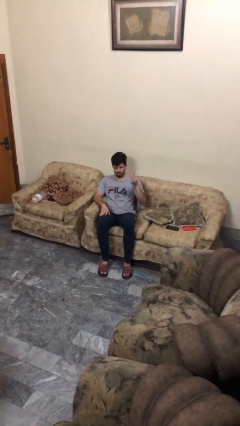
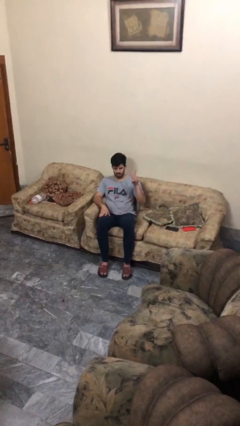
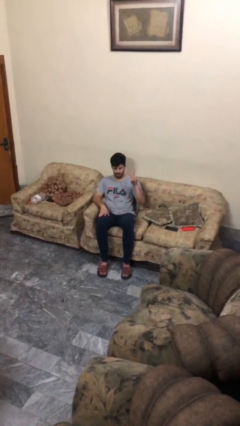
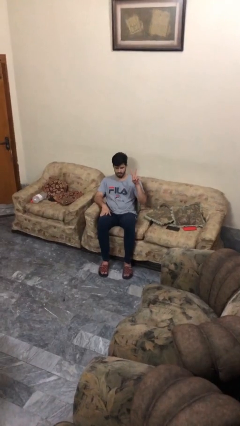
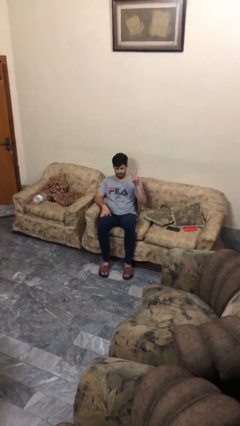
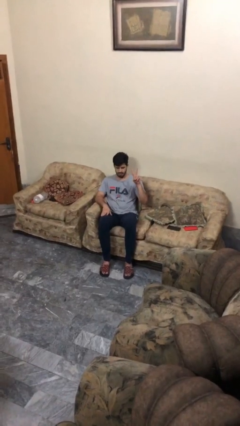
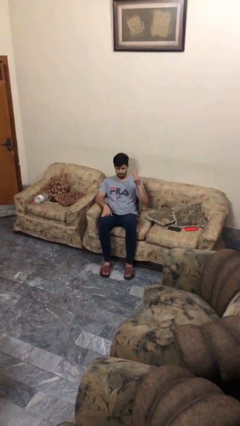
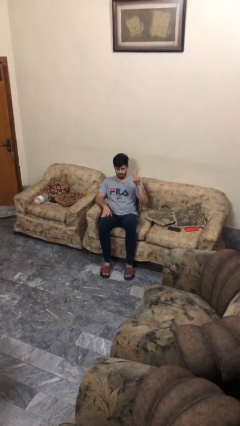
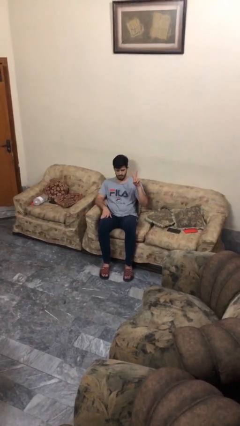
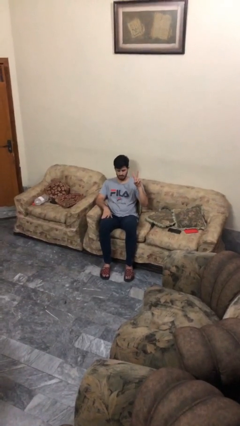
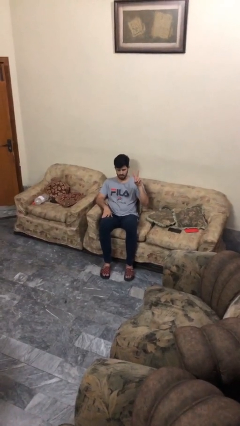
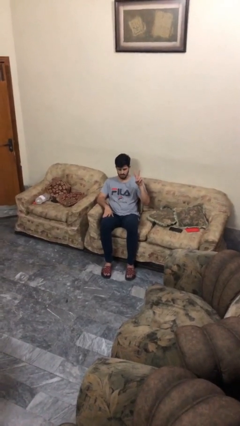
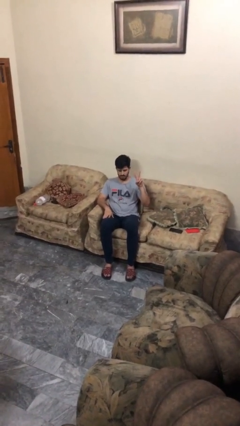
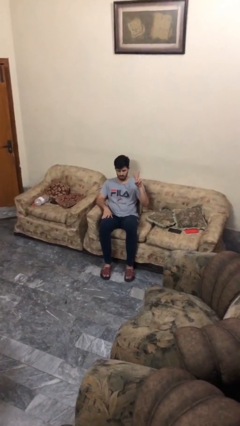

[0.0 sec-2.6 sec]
person gestures peace

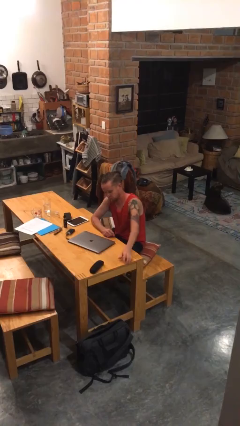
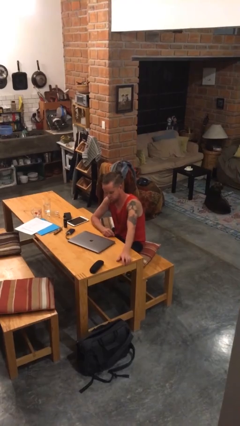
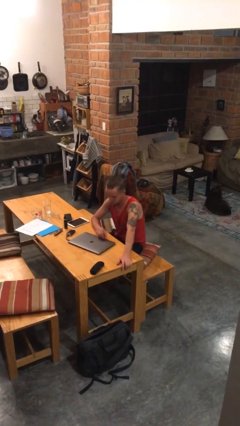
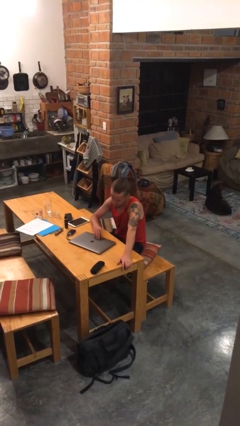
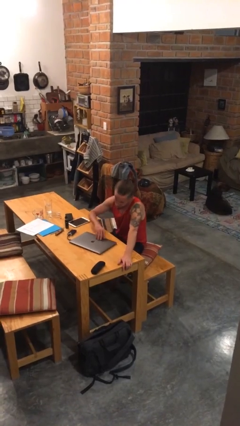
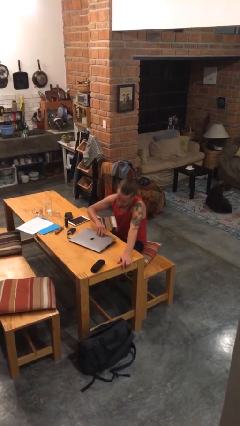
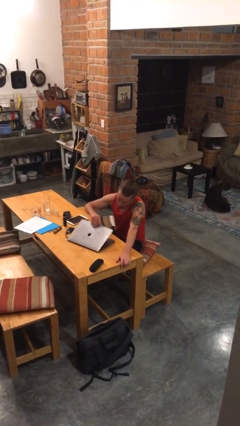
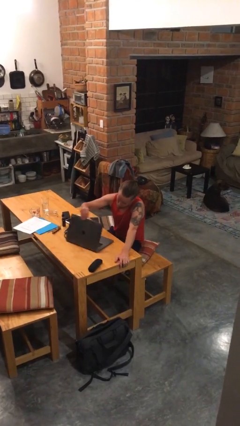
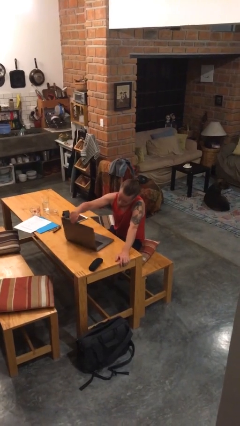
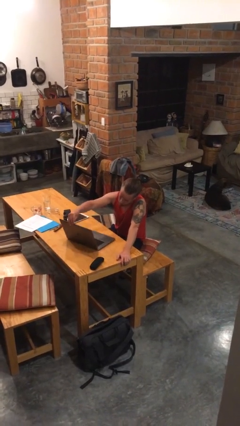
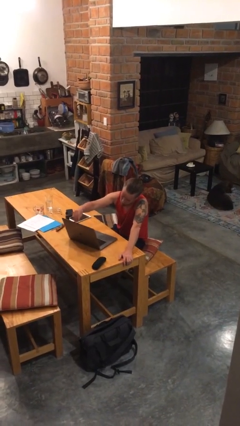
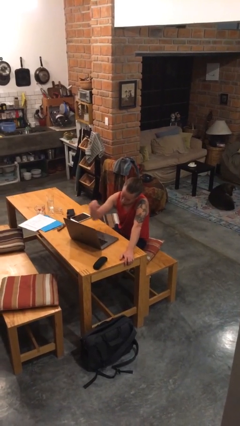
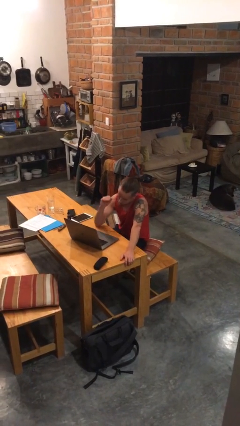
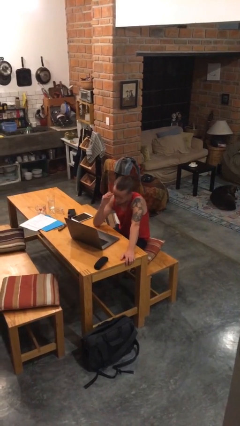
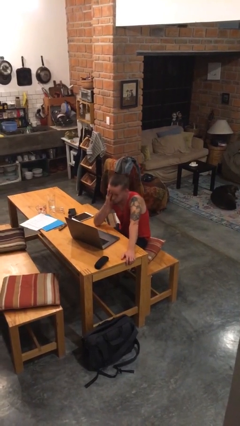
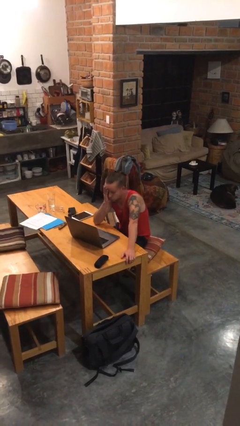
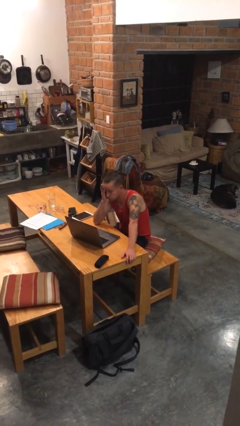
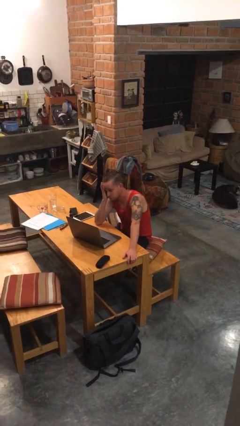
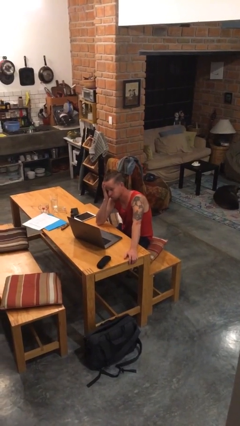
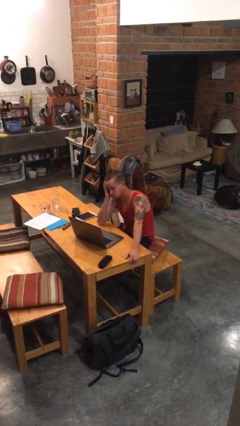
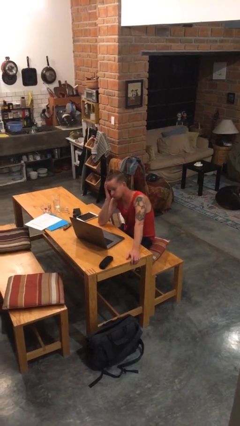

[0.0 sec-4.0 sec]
person opens laptop

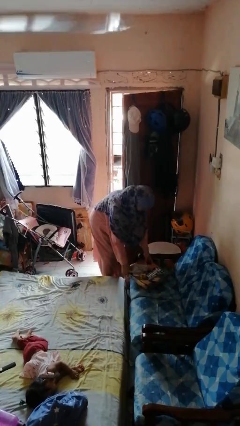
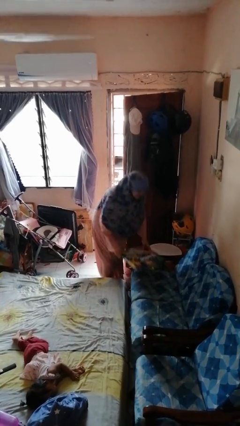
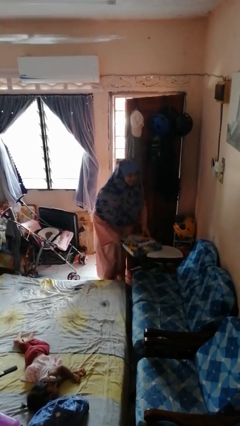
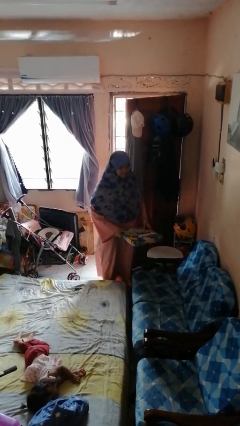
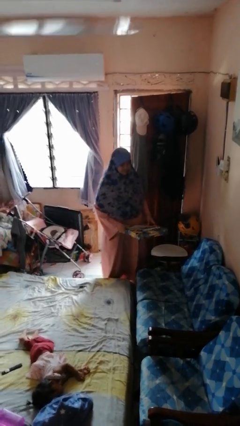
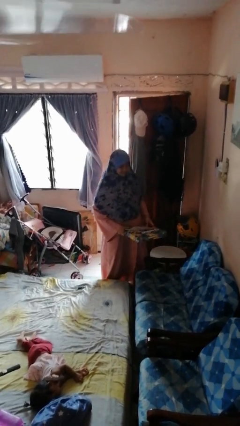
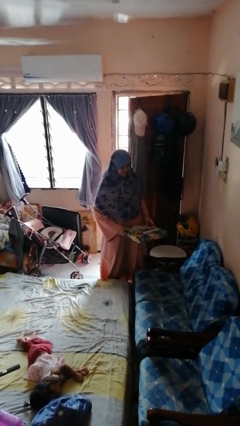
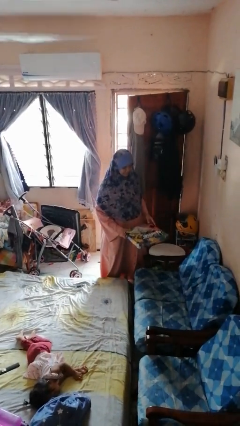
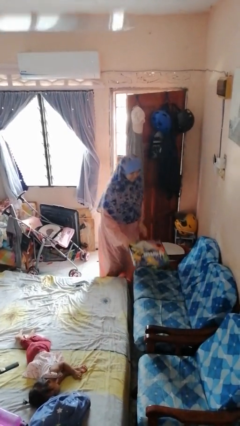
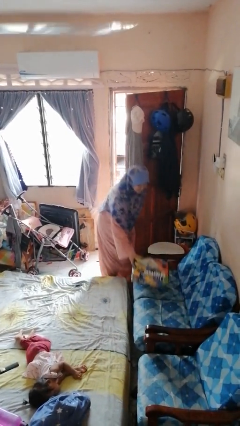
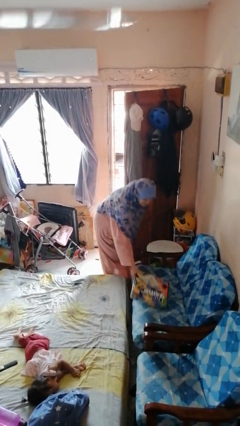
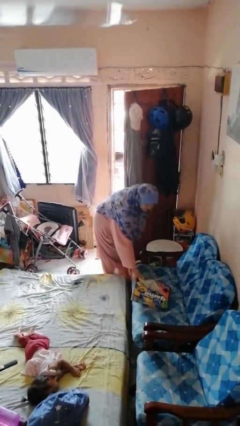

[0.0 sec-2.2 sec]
person puts down object on couch

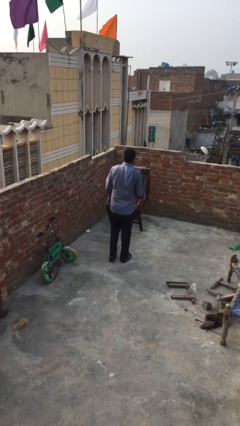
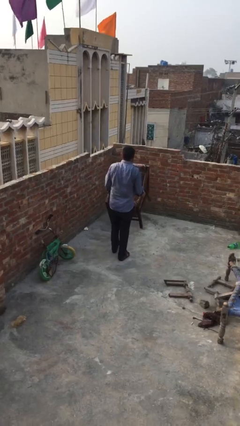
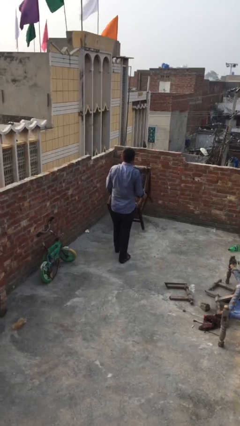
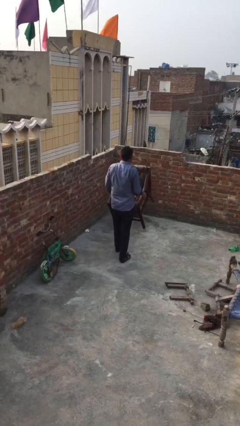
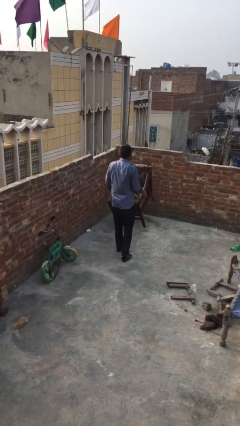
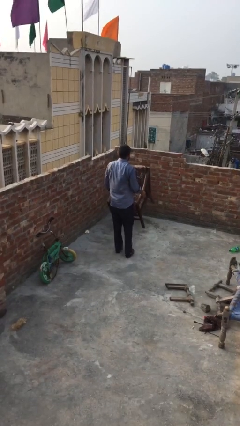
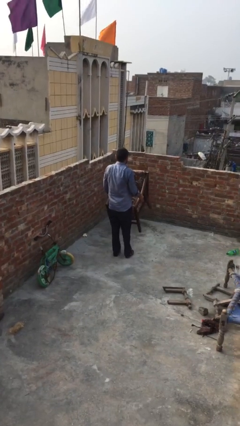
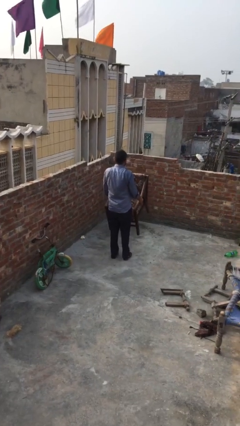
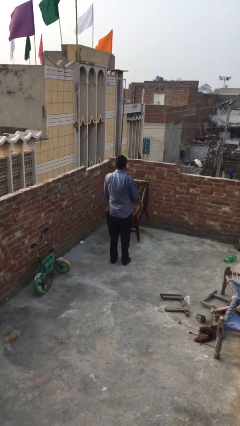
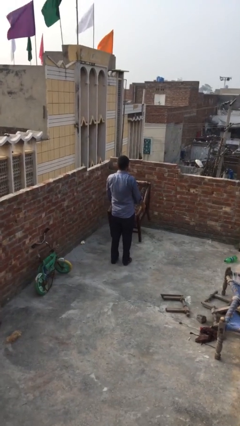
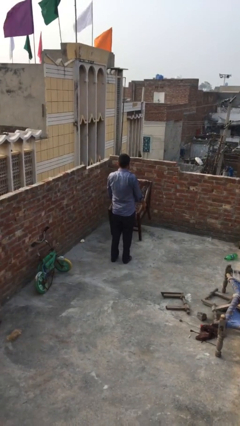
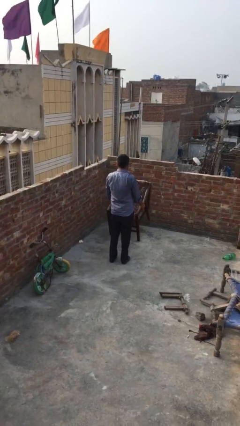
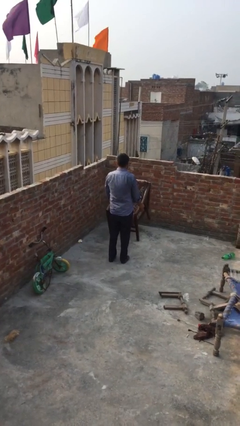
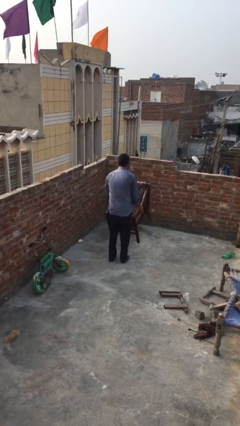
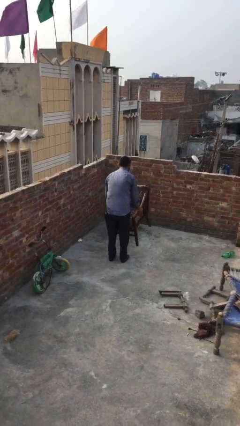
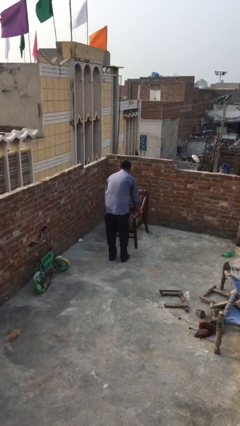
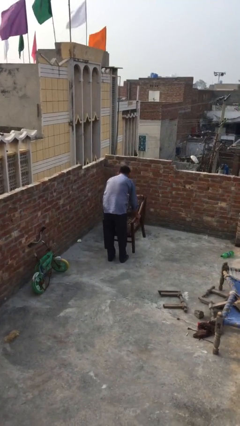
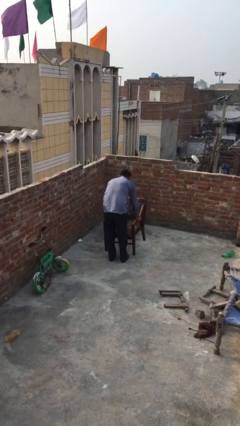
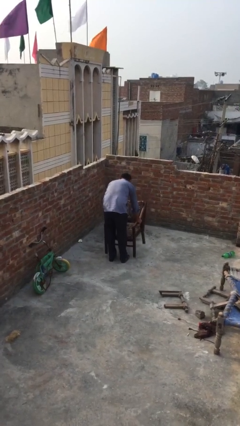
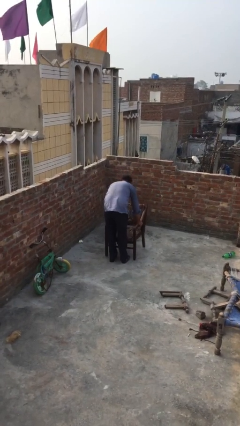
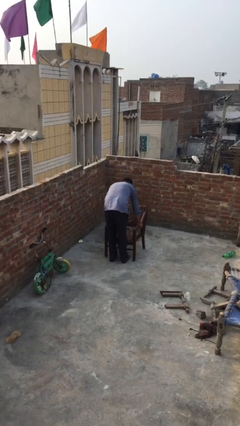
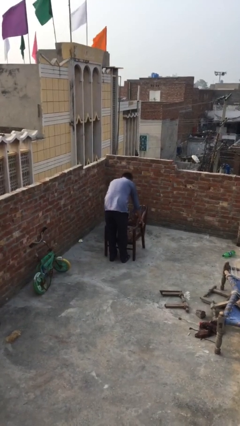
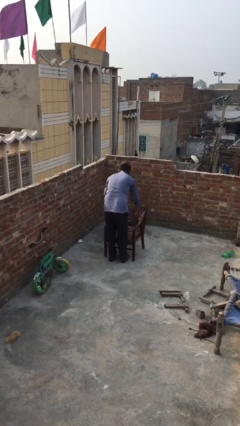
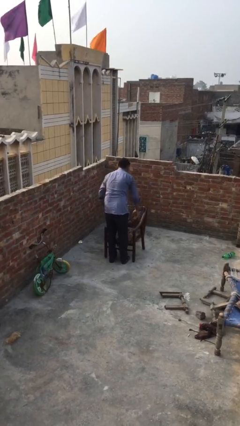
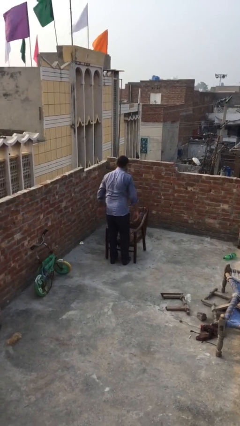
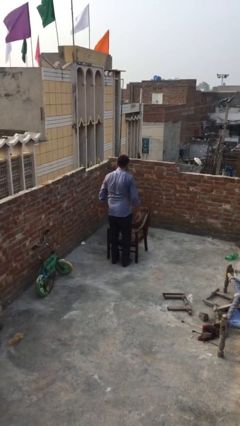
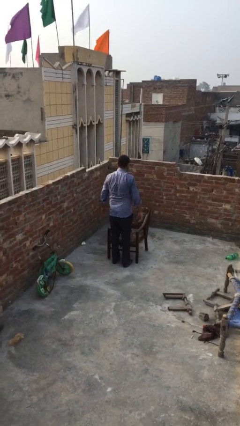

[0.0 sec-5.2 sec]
person puts down object on floor

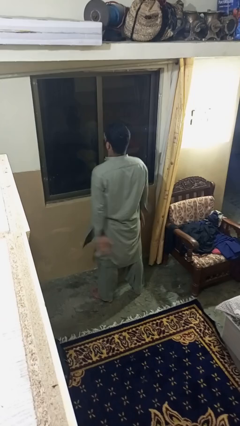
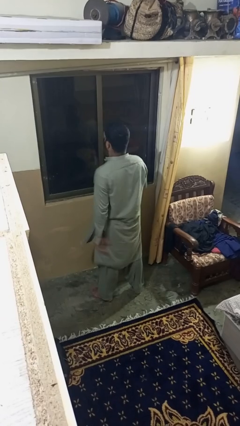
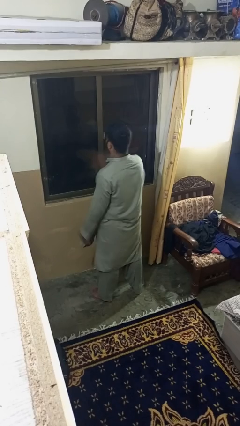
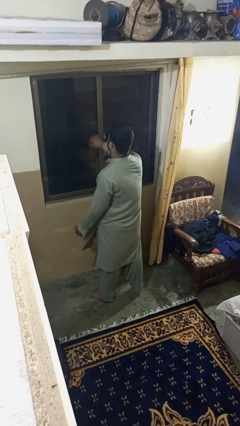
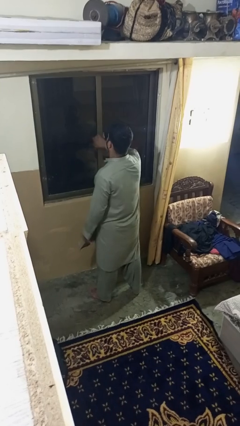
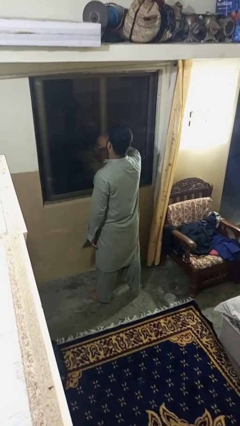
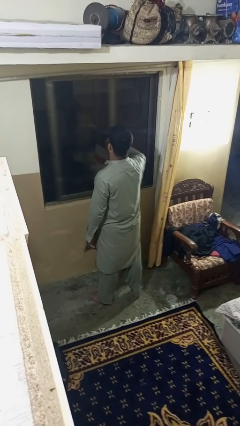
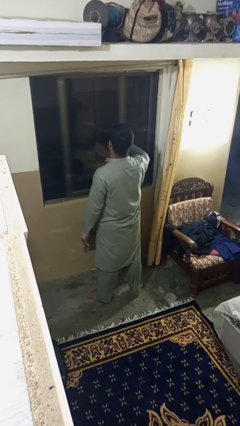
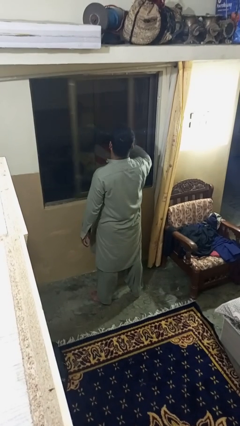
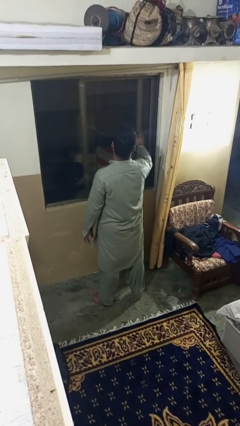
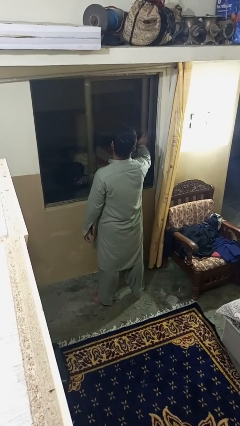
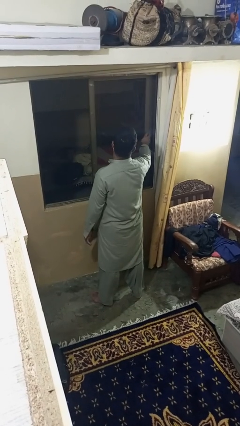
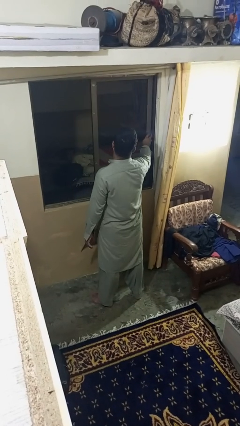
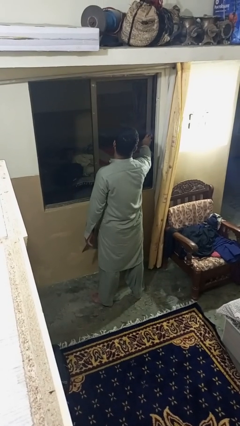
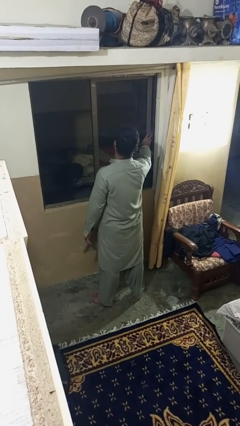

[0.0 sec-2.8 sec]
person opens home window

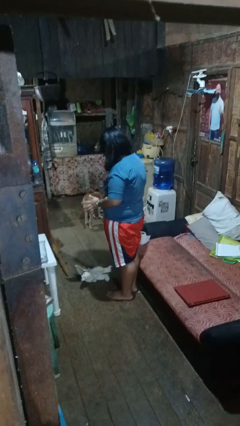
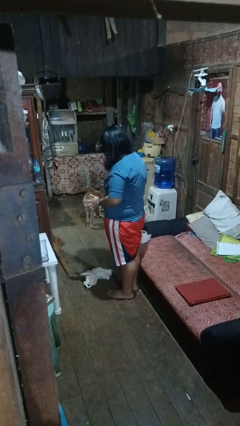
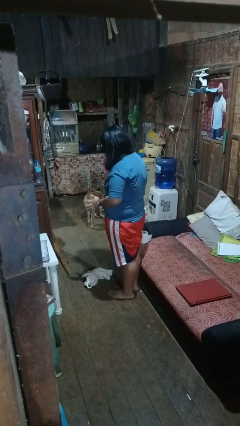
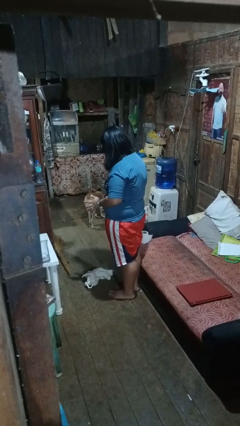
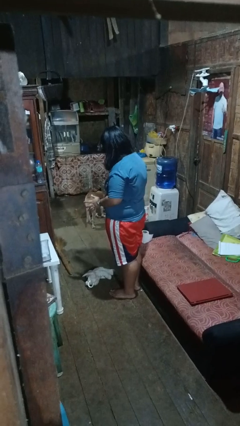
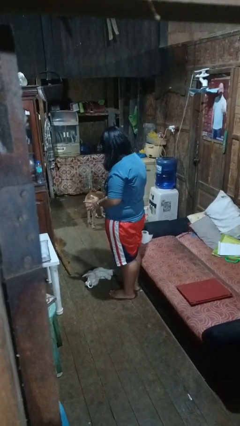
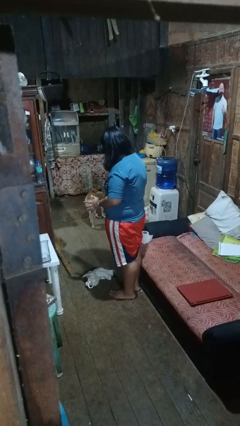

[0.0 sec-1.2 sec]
person drops object
